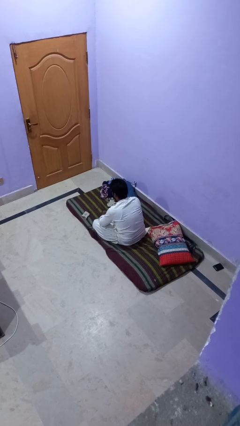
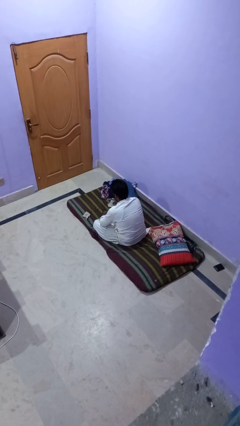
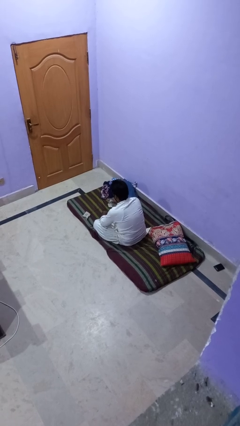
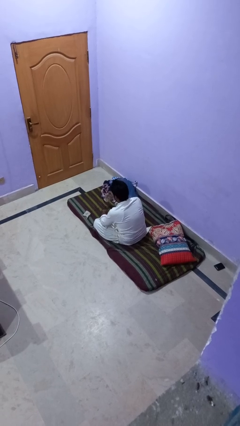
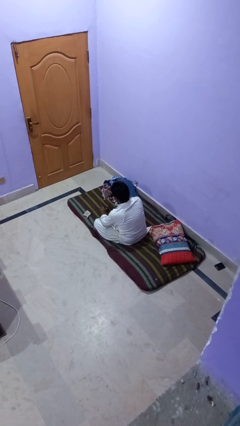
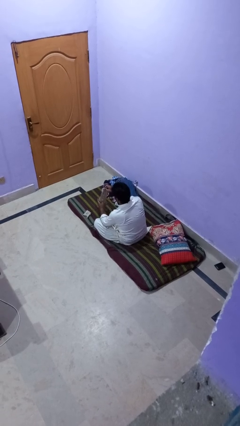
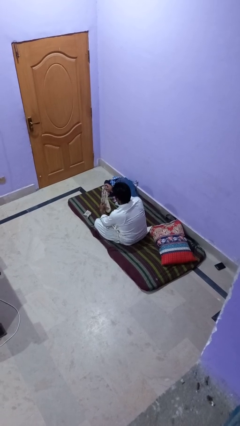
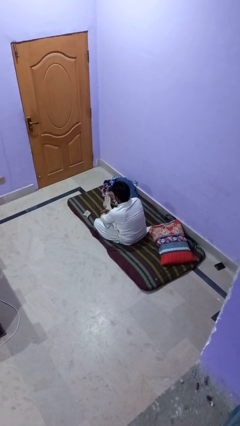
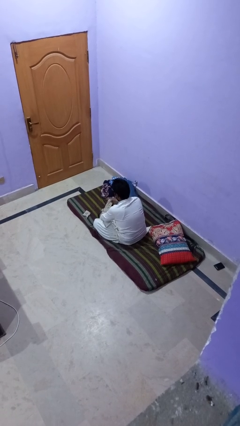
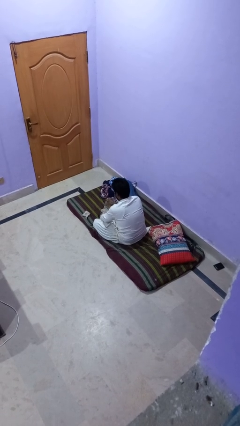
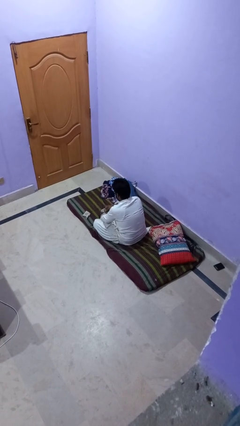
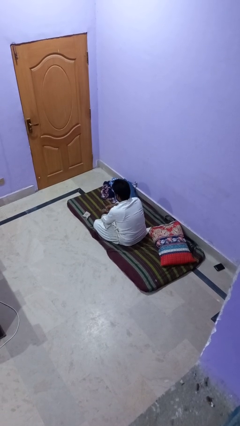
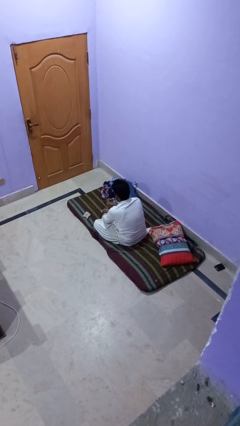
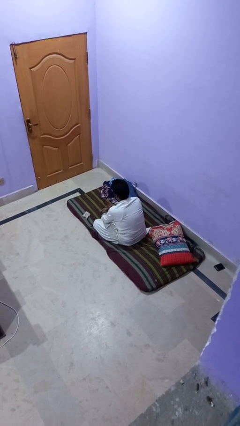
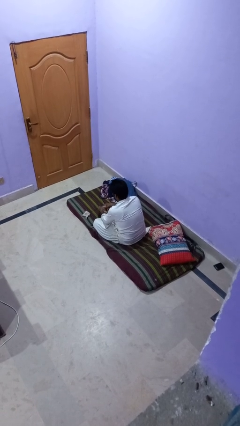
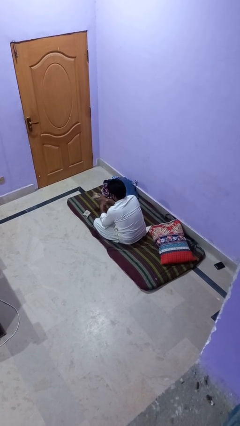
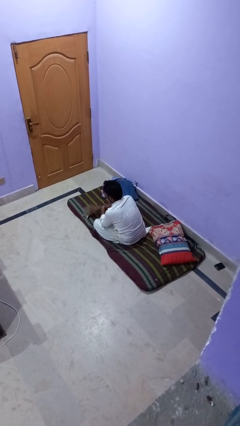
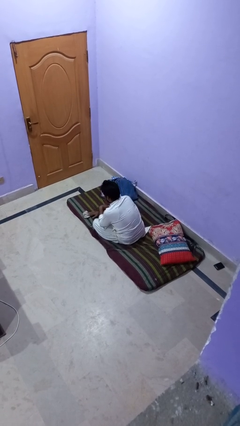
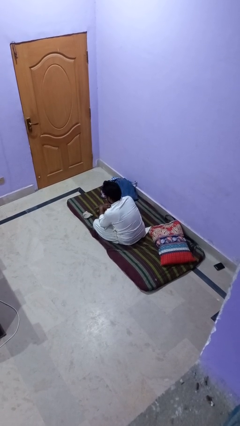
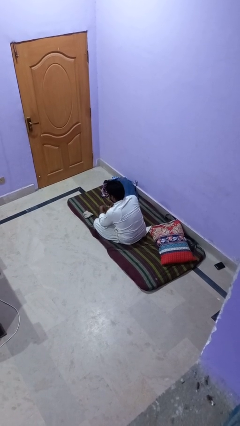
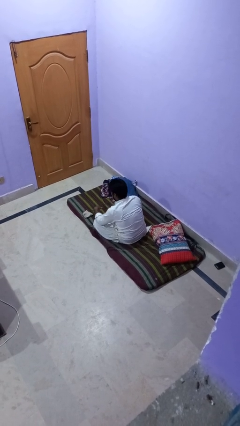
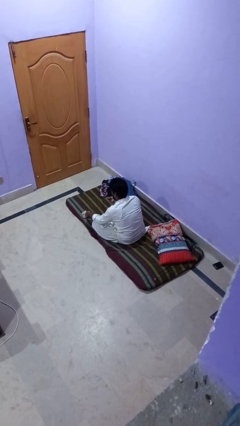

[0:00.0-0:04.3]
person folds socks

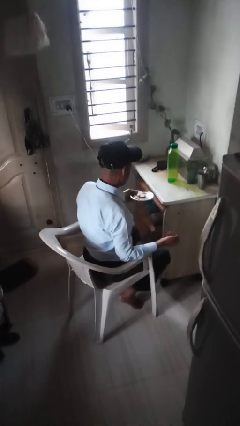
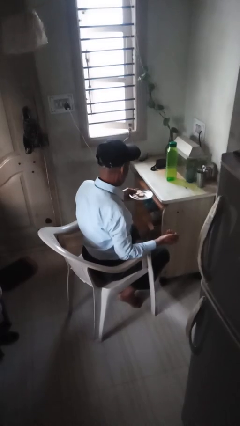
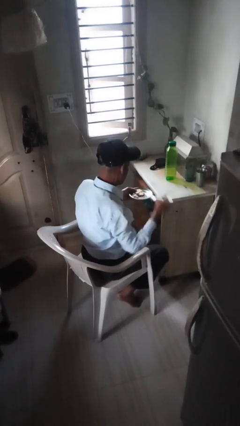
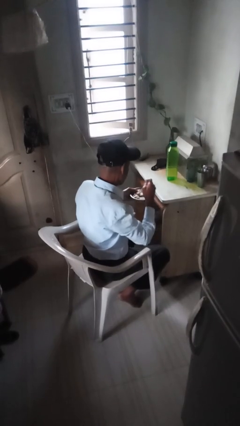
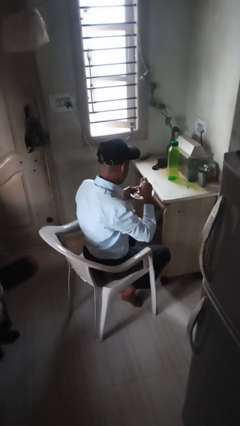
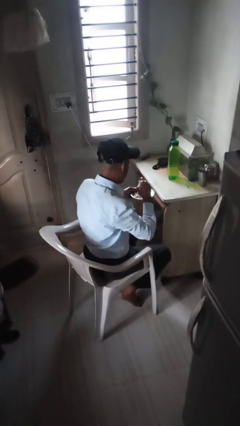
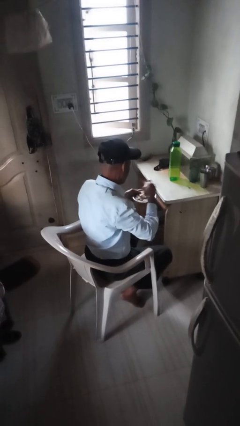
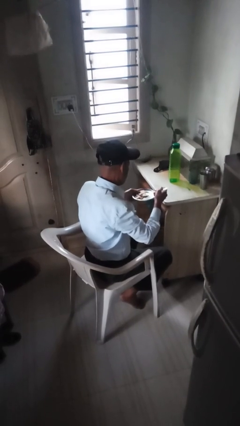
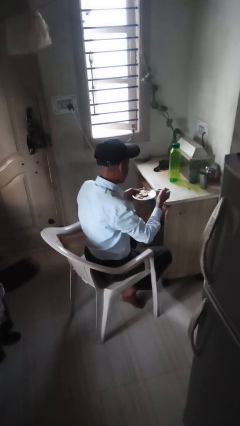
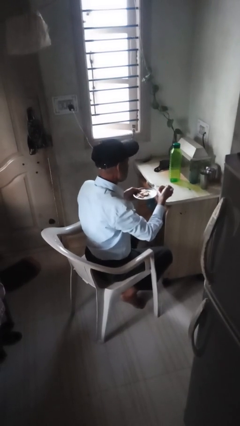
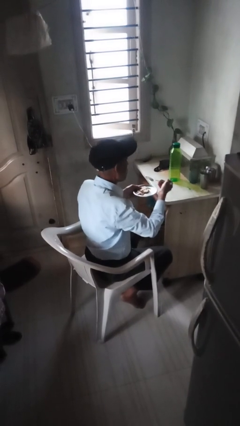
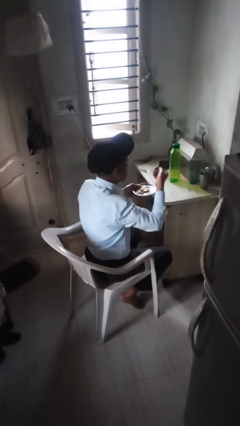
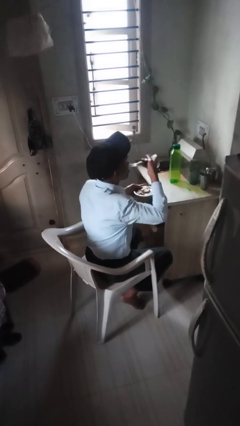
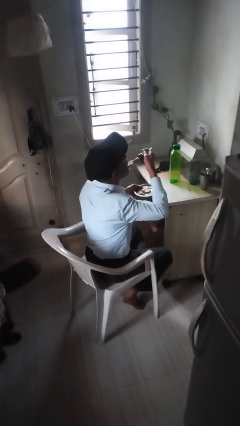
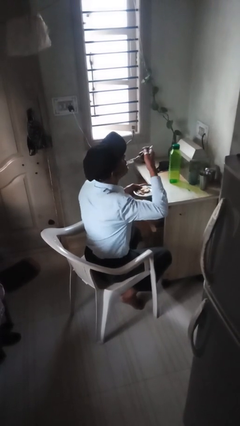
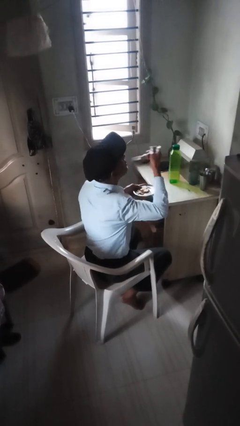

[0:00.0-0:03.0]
person eats with utensil

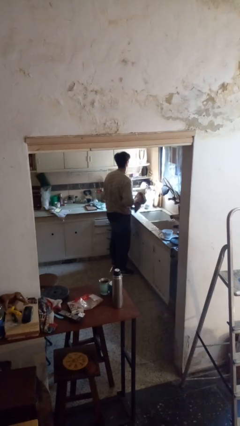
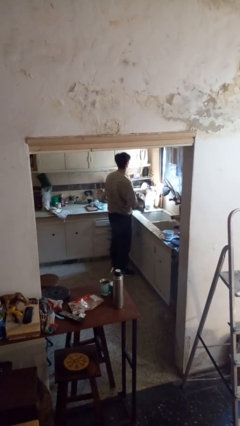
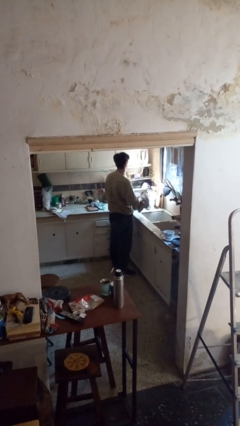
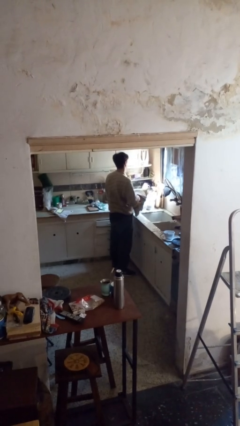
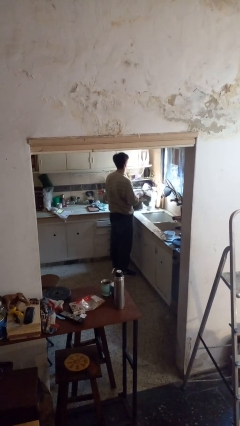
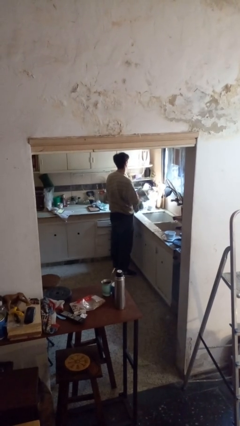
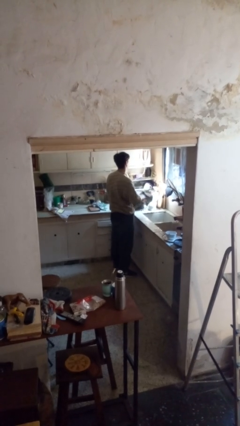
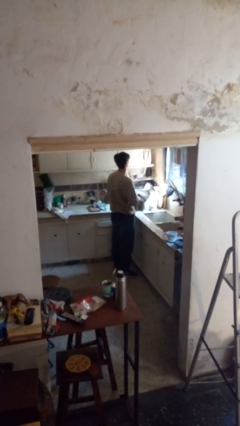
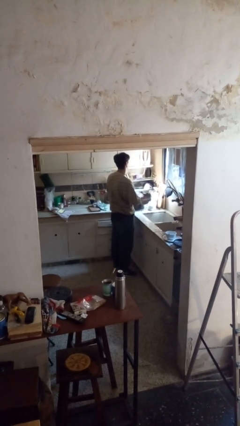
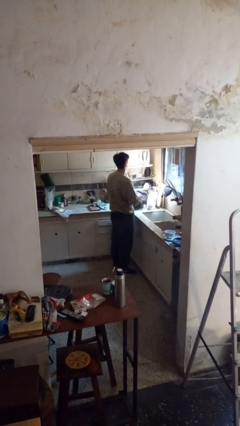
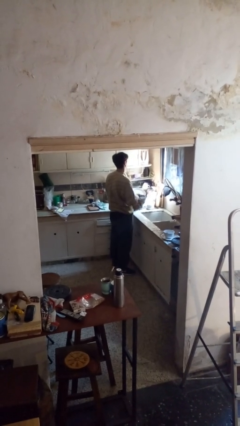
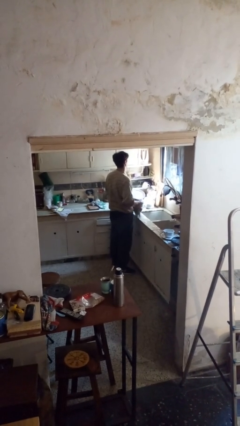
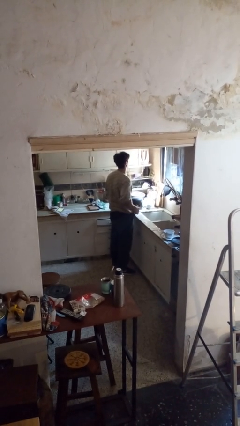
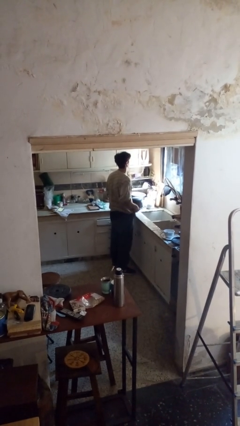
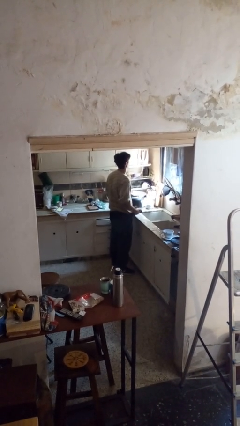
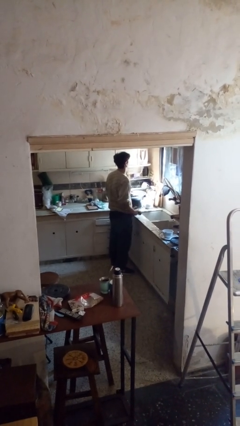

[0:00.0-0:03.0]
person dries dish

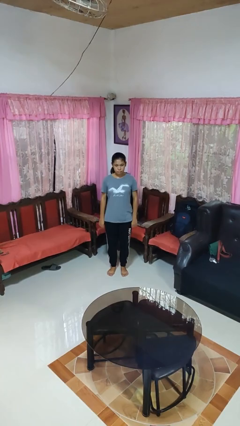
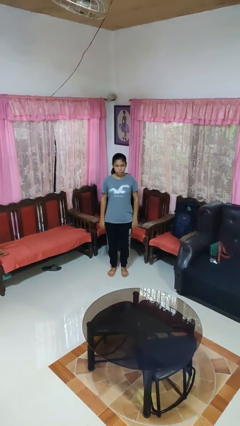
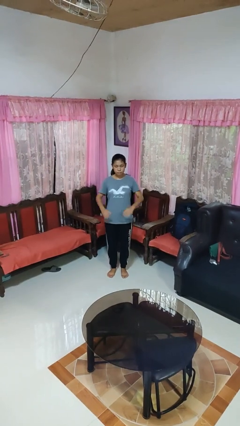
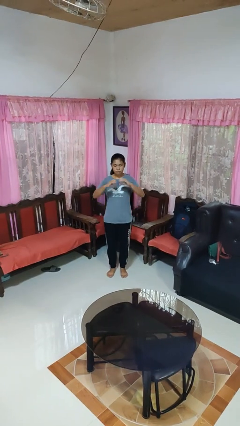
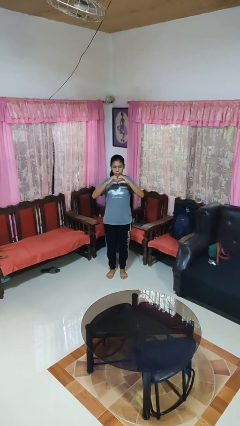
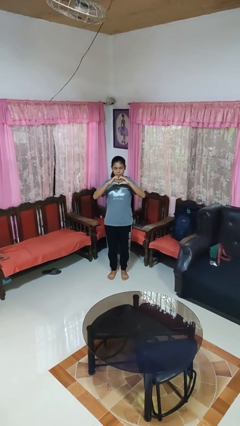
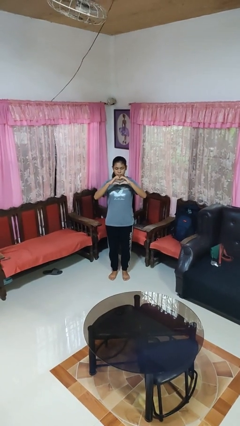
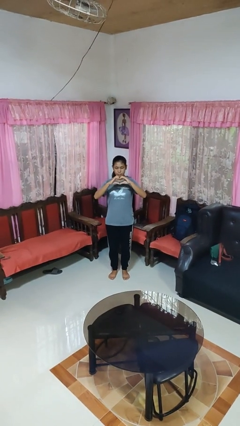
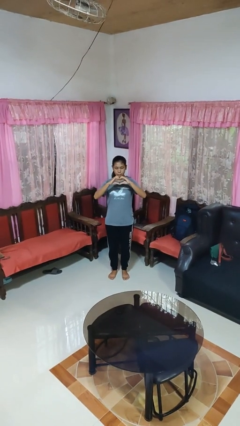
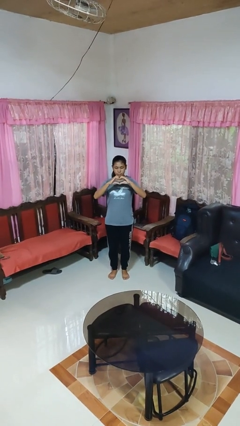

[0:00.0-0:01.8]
person gestures heart

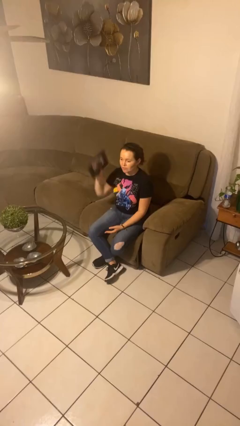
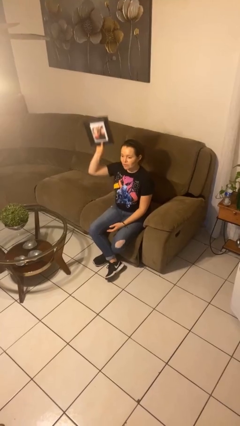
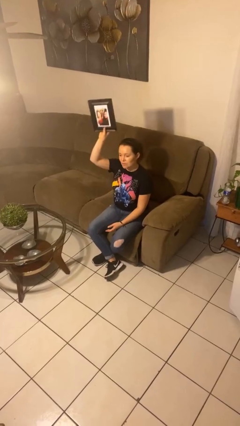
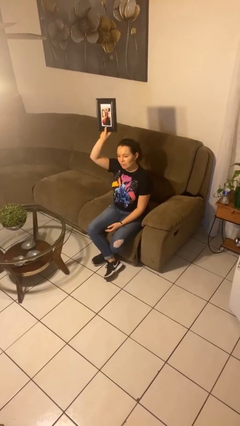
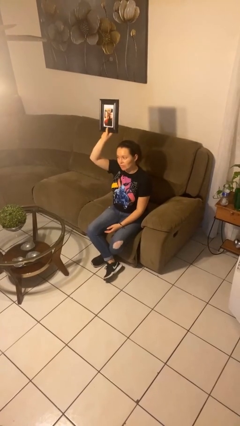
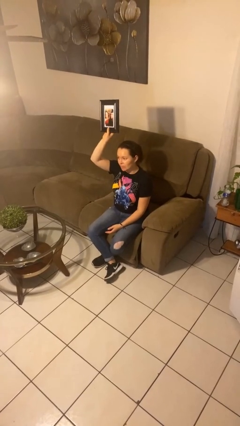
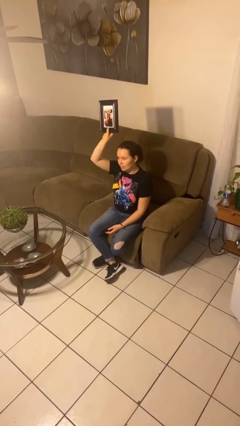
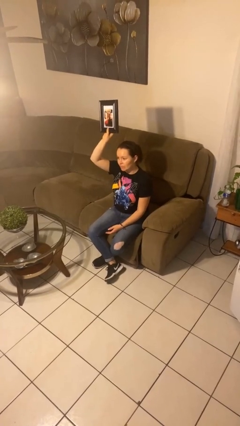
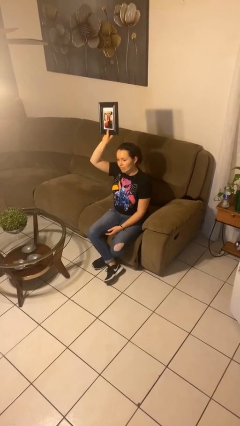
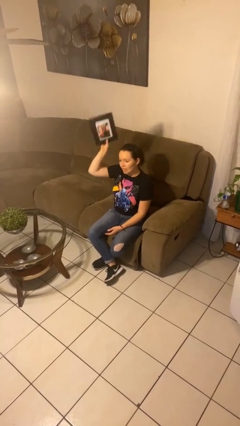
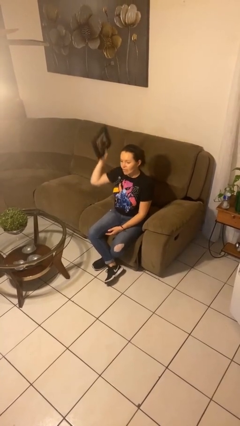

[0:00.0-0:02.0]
person holds object above head

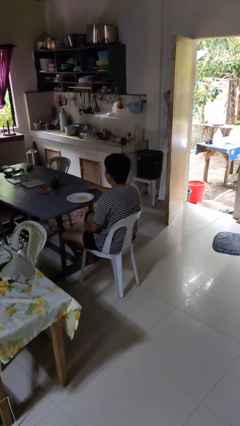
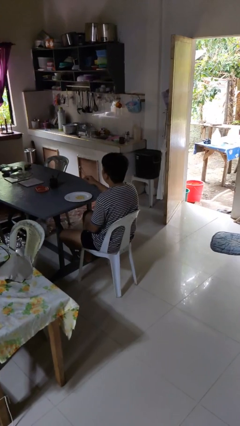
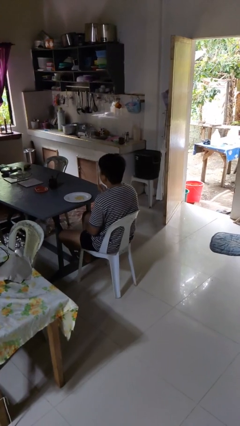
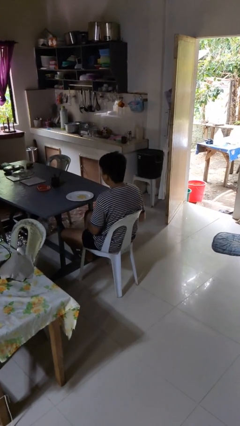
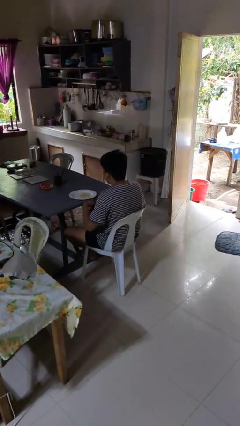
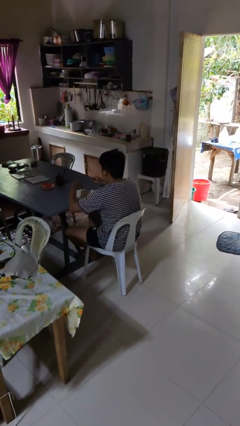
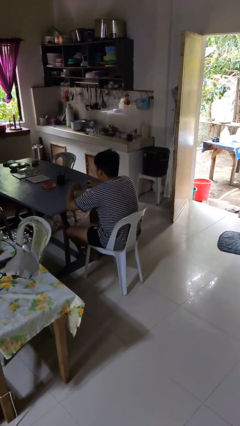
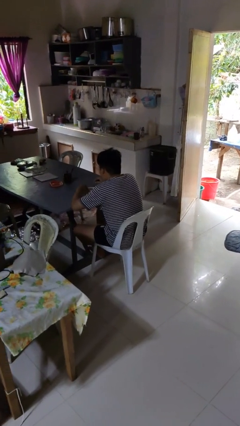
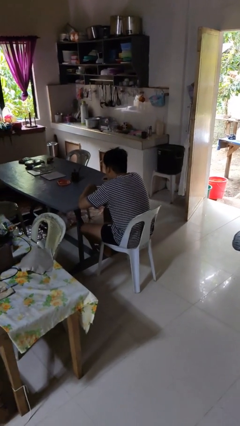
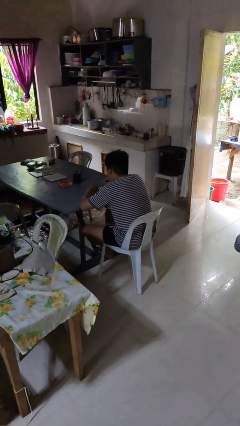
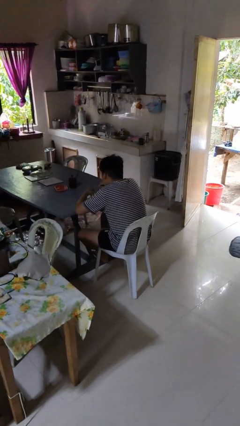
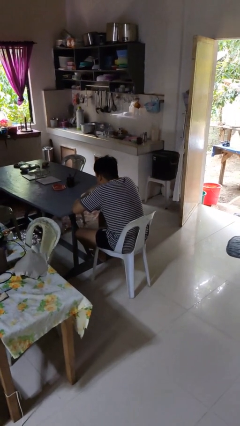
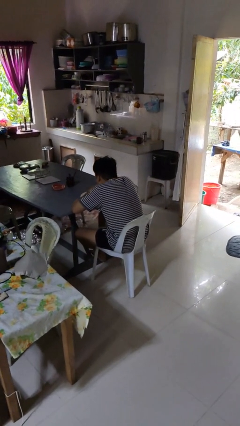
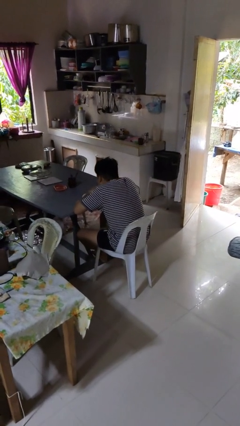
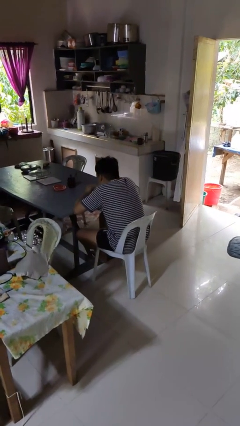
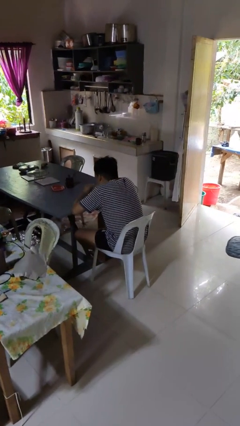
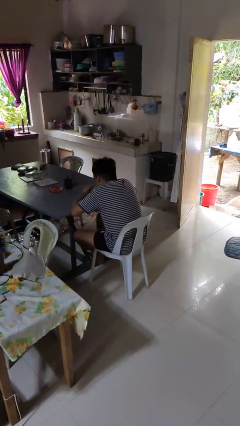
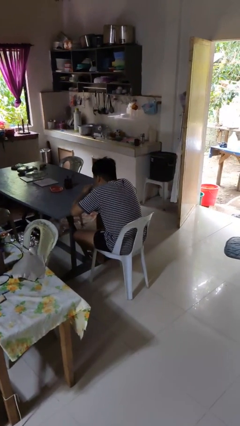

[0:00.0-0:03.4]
person eats with hands
